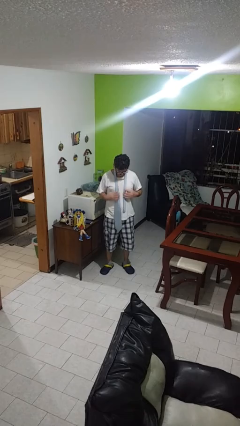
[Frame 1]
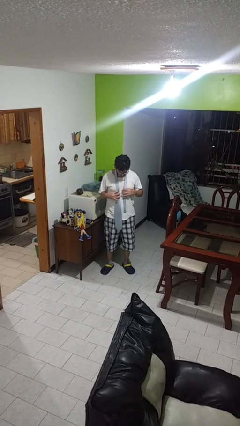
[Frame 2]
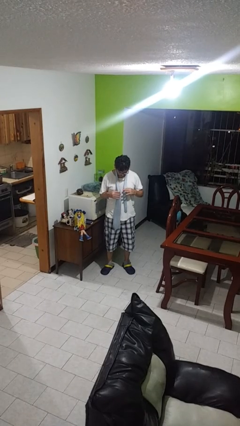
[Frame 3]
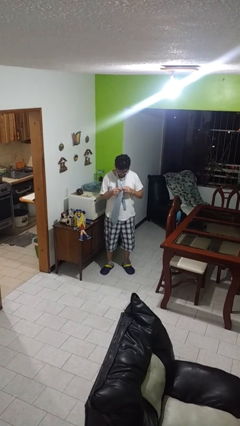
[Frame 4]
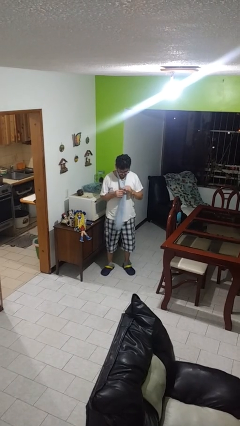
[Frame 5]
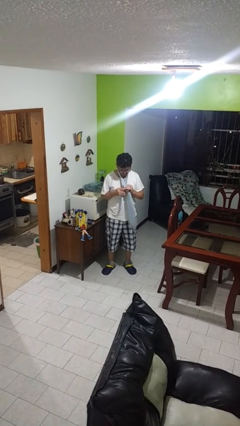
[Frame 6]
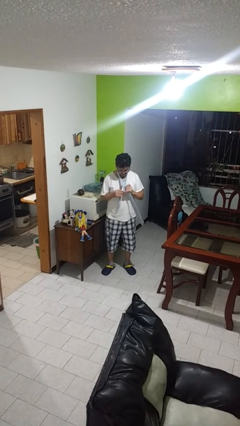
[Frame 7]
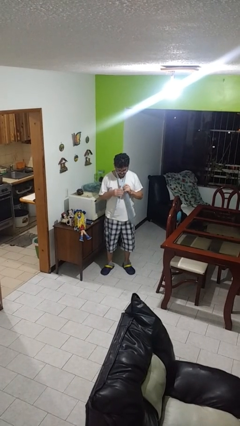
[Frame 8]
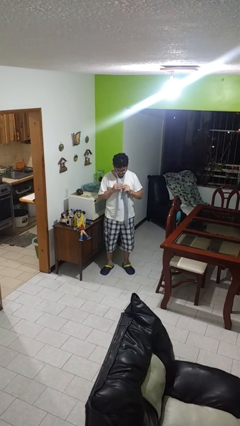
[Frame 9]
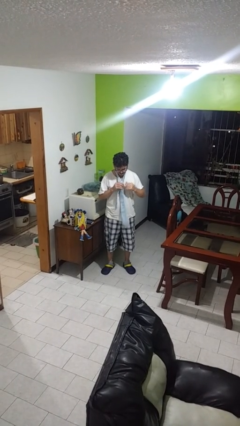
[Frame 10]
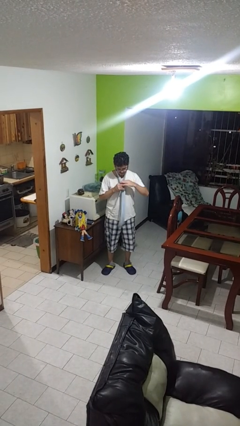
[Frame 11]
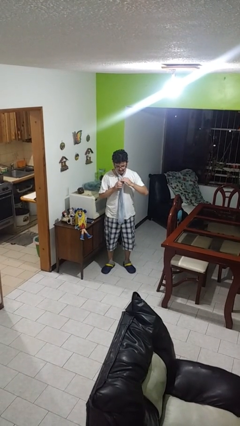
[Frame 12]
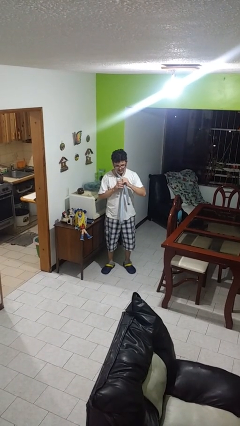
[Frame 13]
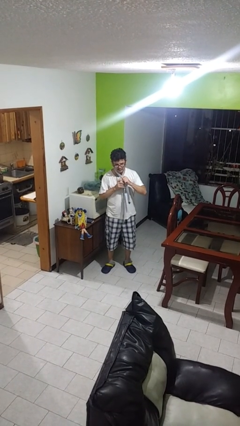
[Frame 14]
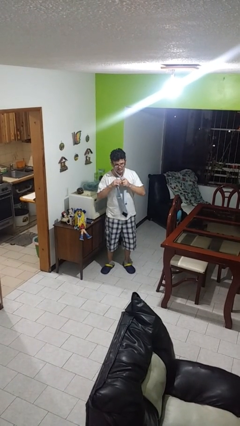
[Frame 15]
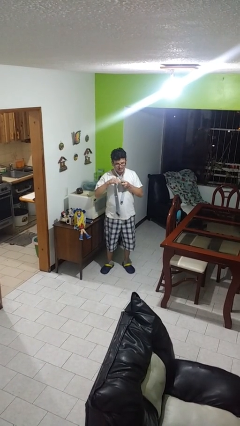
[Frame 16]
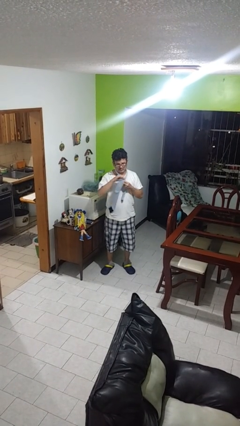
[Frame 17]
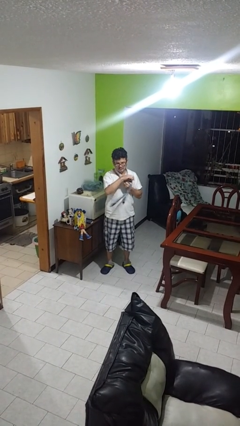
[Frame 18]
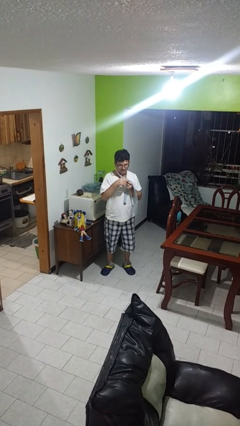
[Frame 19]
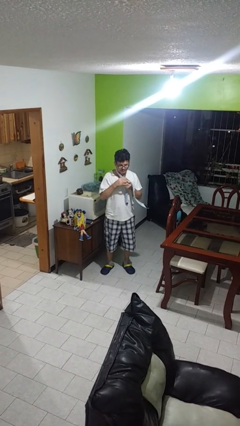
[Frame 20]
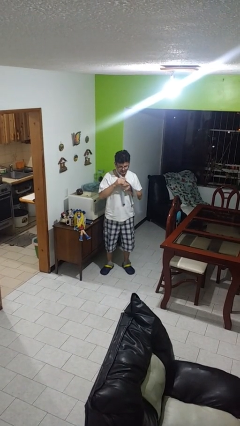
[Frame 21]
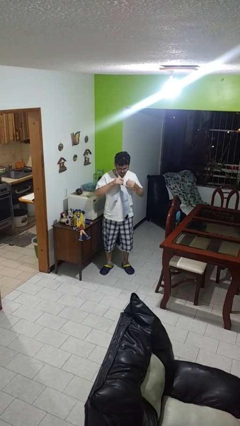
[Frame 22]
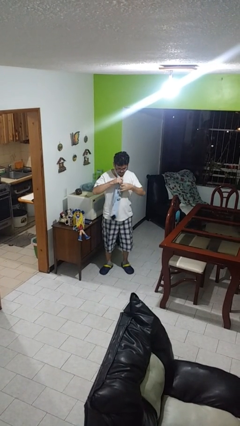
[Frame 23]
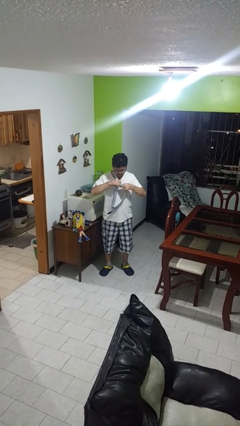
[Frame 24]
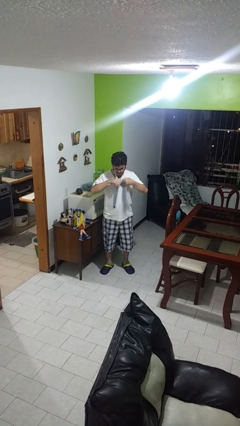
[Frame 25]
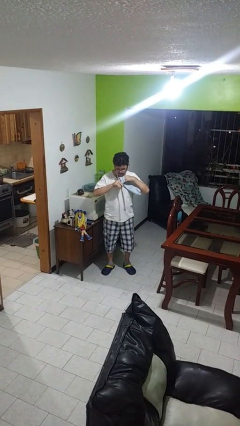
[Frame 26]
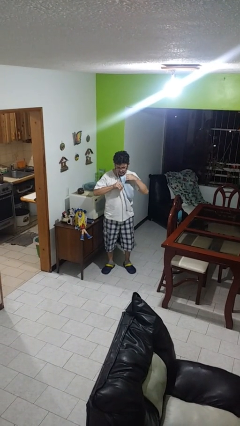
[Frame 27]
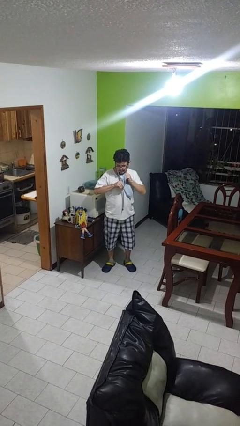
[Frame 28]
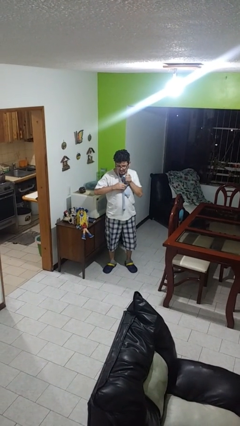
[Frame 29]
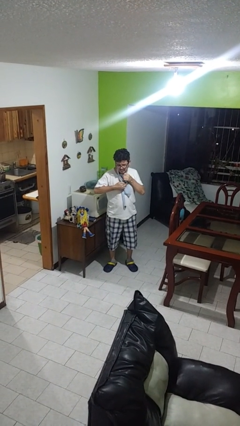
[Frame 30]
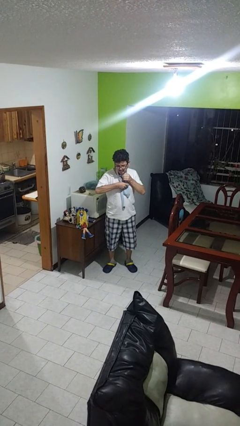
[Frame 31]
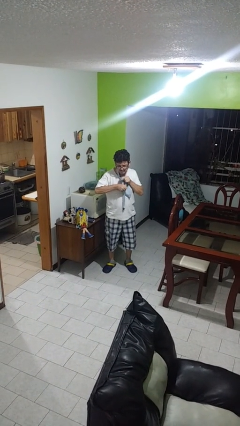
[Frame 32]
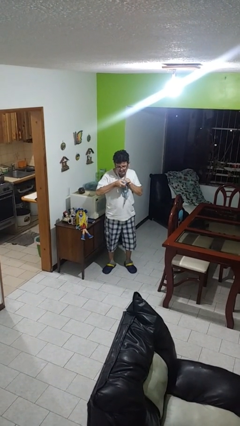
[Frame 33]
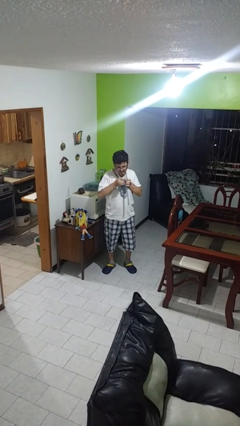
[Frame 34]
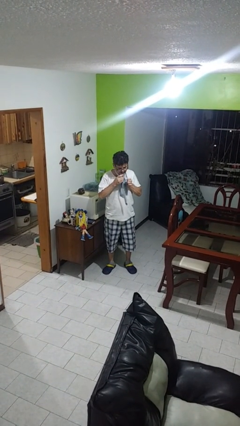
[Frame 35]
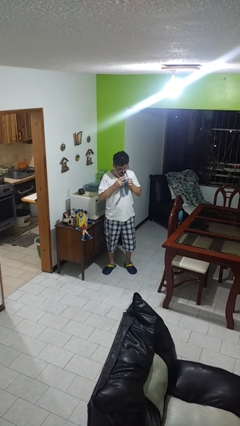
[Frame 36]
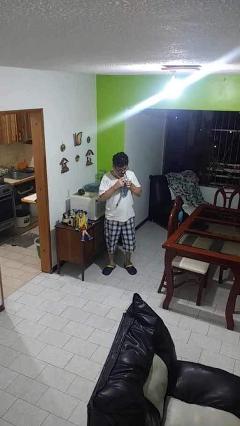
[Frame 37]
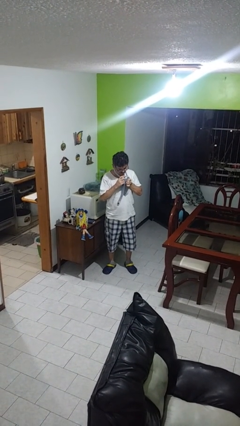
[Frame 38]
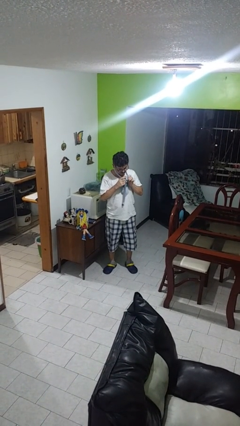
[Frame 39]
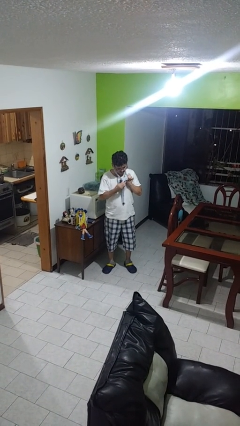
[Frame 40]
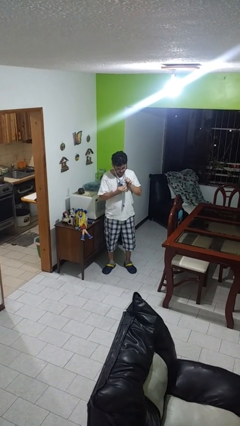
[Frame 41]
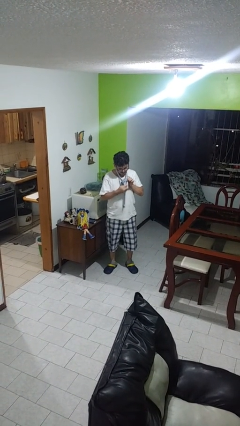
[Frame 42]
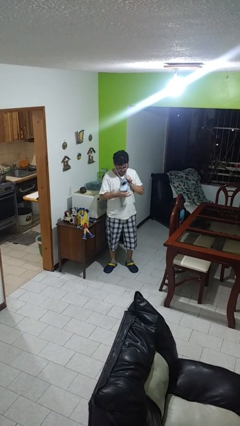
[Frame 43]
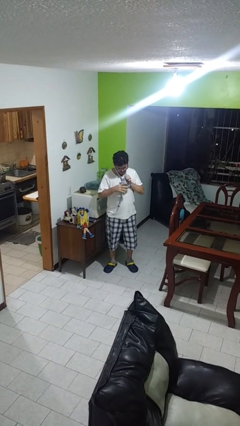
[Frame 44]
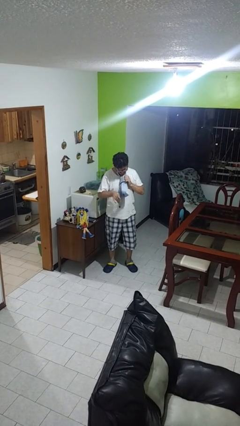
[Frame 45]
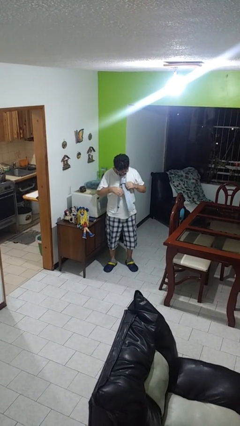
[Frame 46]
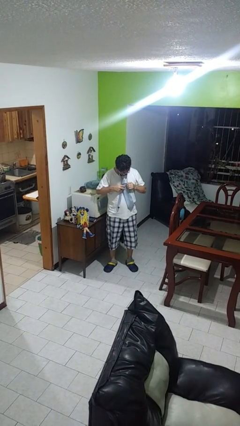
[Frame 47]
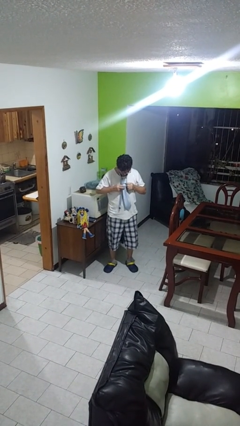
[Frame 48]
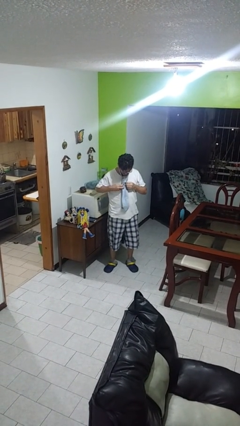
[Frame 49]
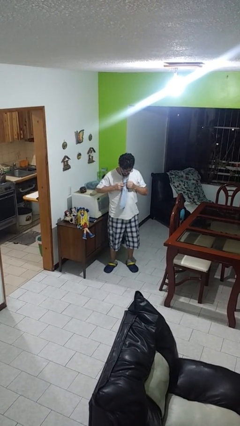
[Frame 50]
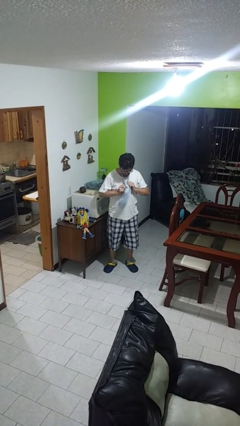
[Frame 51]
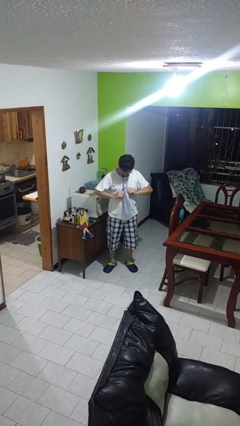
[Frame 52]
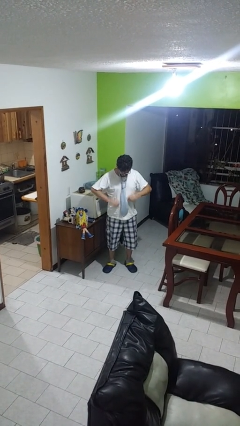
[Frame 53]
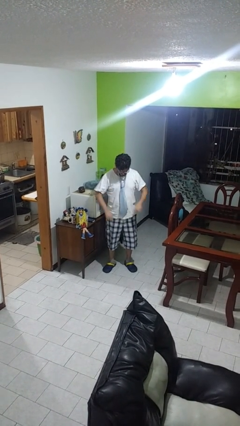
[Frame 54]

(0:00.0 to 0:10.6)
person puts on necktie

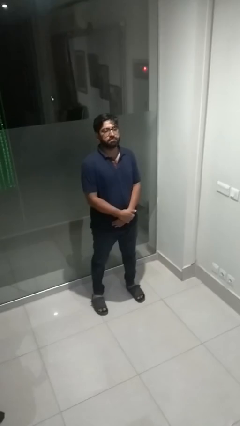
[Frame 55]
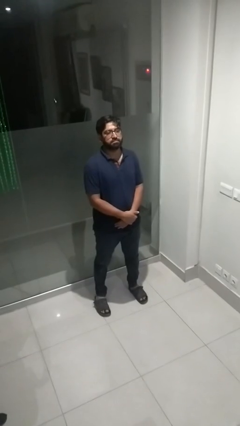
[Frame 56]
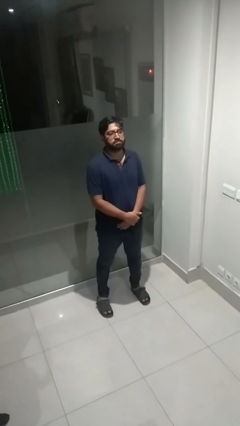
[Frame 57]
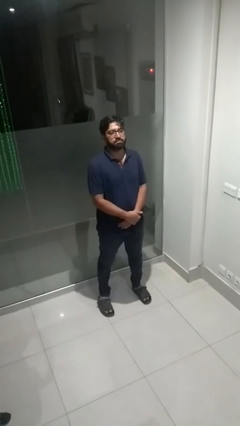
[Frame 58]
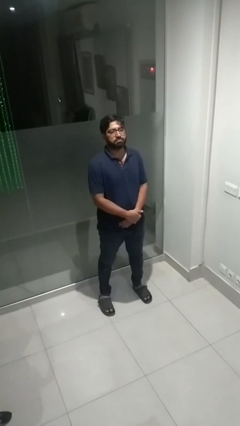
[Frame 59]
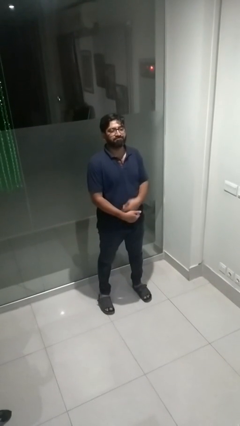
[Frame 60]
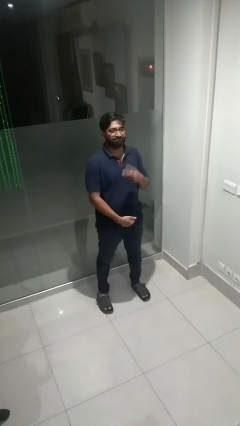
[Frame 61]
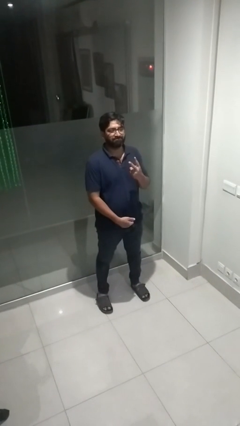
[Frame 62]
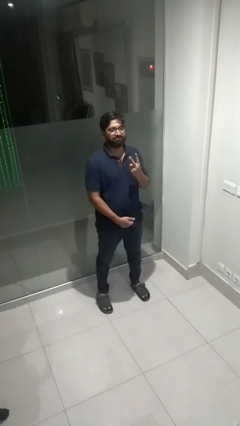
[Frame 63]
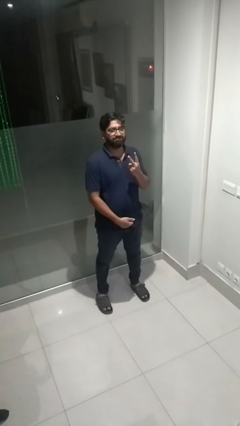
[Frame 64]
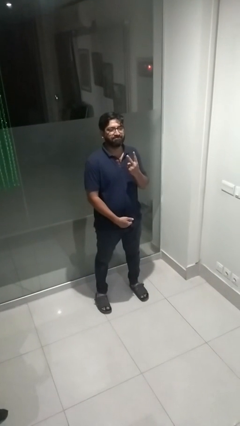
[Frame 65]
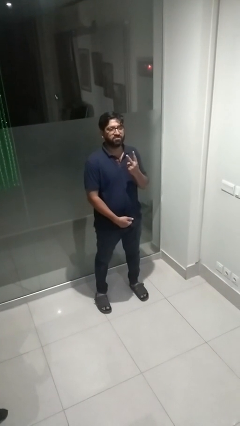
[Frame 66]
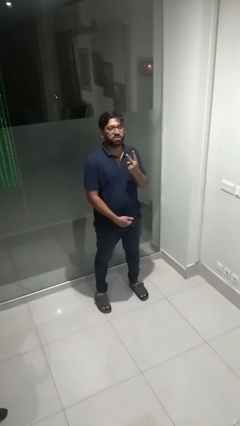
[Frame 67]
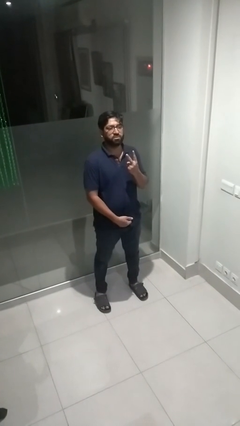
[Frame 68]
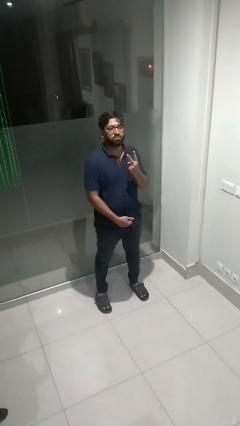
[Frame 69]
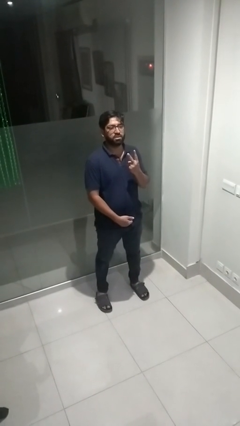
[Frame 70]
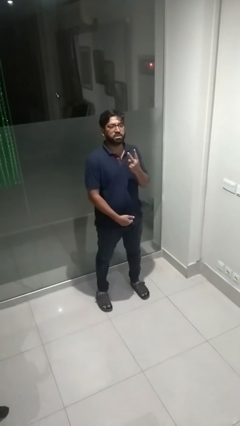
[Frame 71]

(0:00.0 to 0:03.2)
person gestures peace

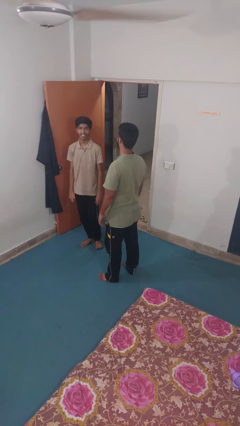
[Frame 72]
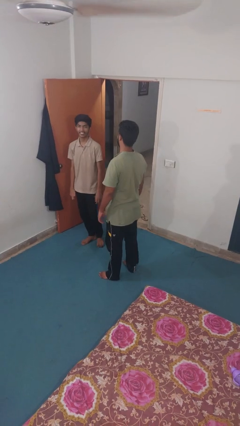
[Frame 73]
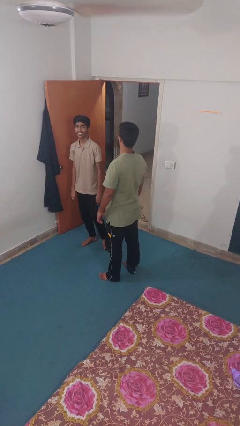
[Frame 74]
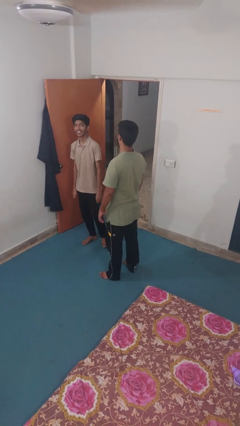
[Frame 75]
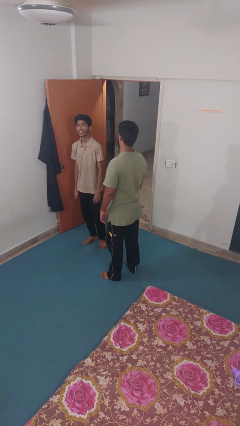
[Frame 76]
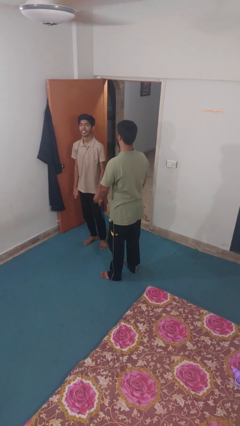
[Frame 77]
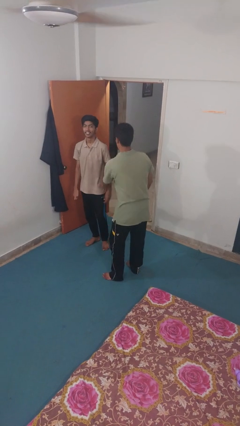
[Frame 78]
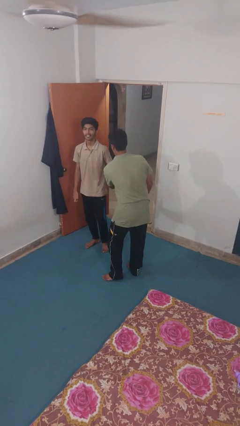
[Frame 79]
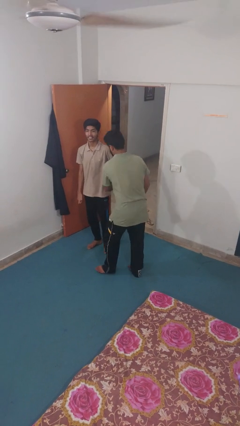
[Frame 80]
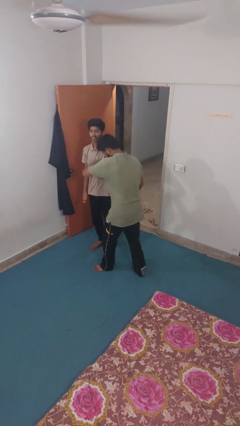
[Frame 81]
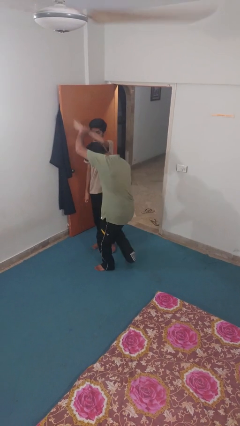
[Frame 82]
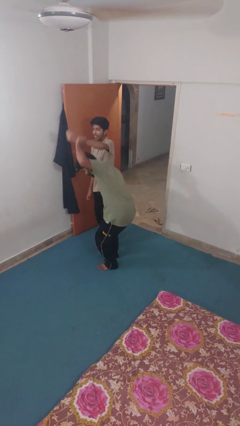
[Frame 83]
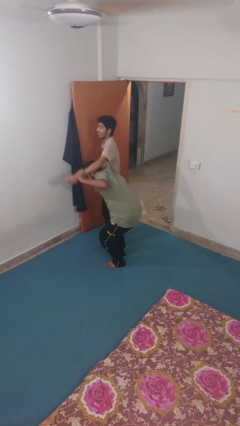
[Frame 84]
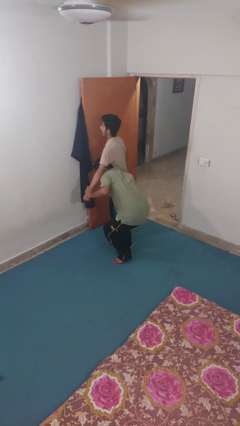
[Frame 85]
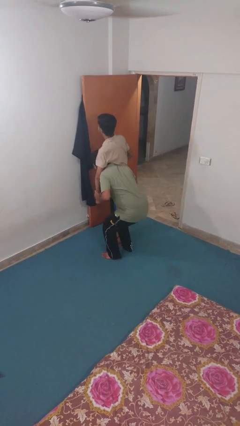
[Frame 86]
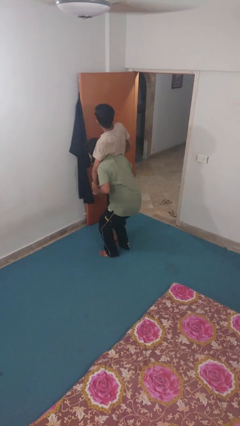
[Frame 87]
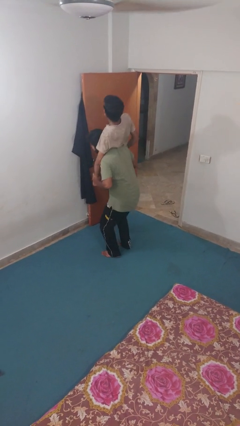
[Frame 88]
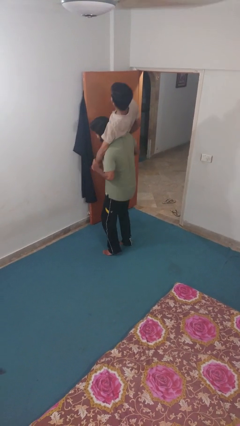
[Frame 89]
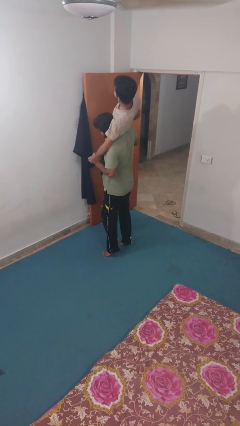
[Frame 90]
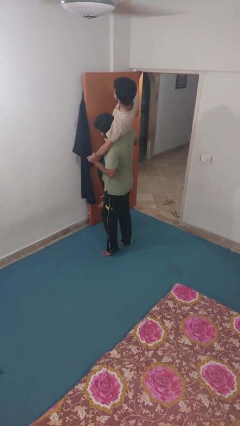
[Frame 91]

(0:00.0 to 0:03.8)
person carries person over shoulder

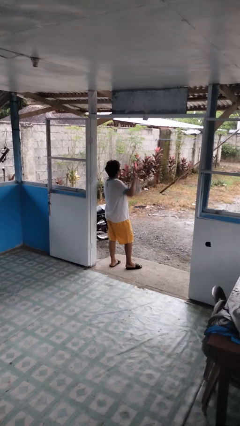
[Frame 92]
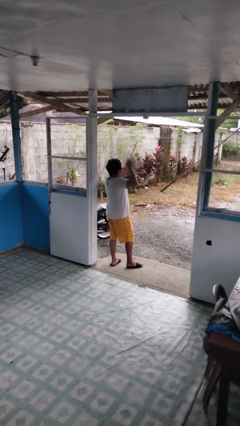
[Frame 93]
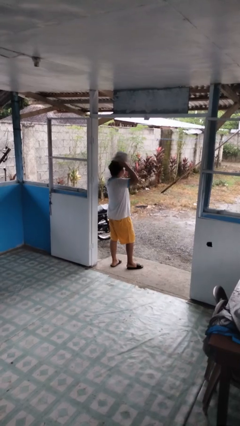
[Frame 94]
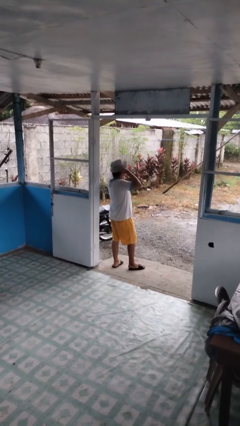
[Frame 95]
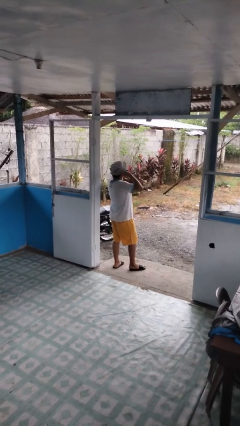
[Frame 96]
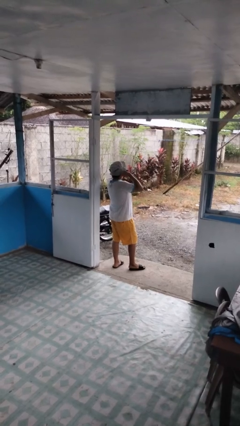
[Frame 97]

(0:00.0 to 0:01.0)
person puts on hat
